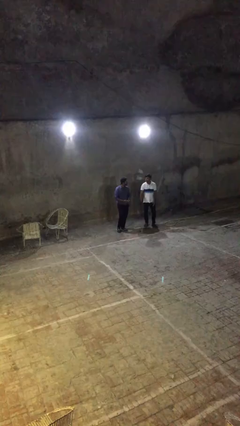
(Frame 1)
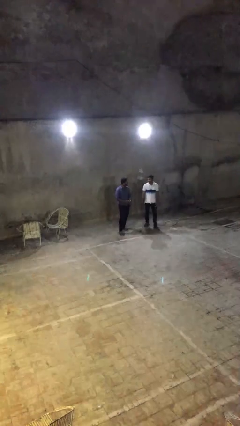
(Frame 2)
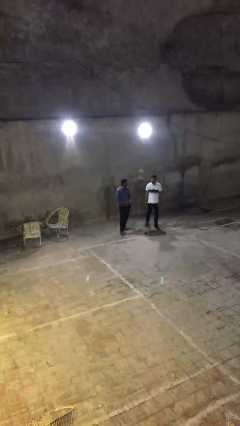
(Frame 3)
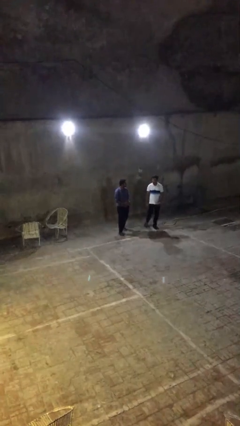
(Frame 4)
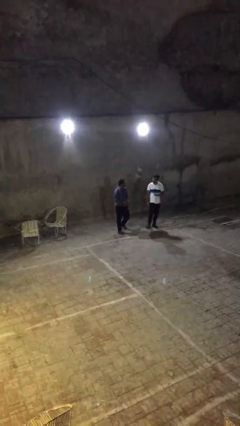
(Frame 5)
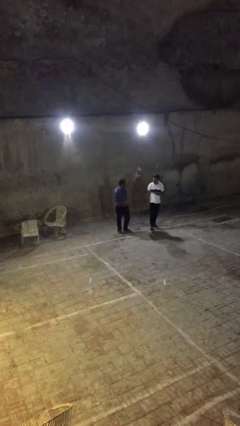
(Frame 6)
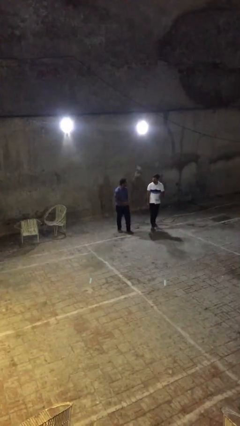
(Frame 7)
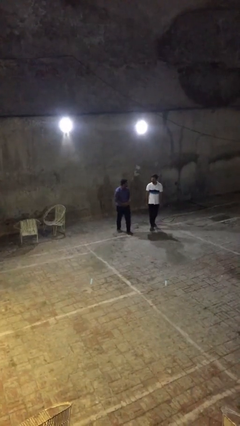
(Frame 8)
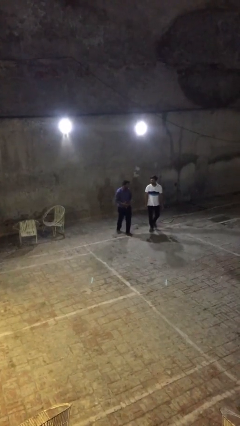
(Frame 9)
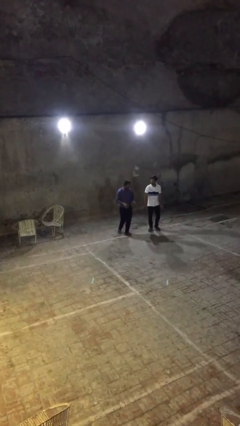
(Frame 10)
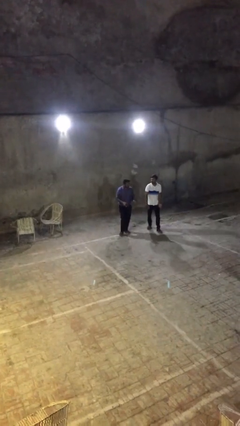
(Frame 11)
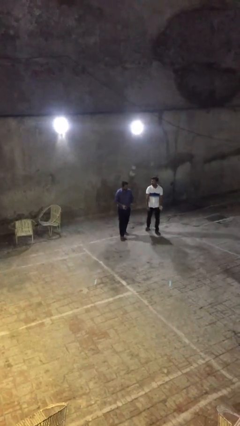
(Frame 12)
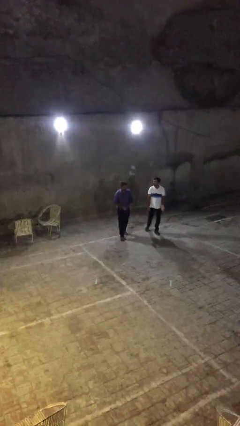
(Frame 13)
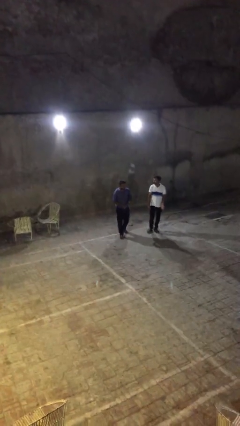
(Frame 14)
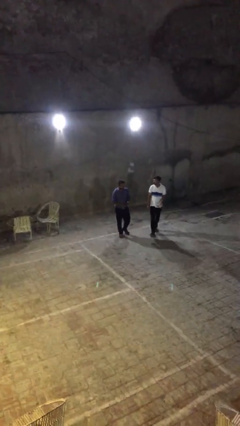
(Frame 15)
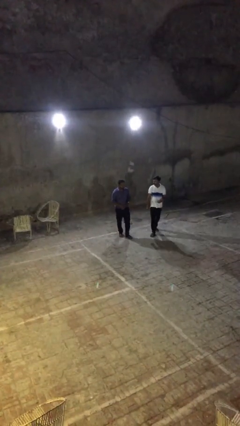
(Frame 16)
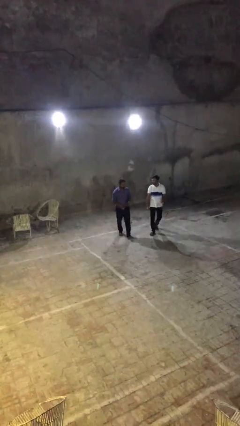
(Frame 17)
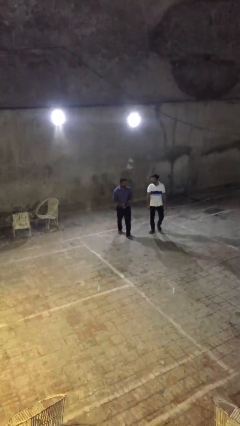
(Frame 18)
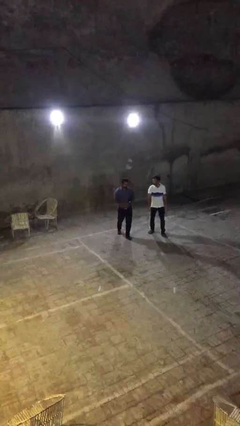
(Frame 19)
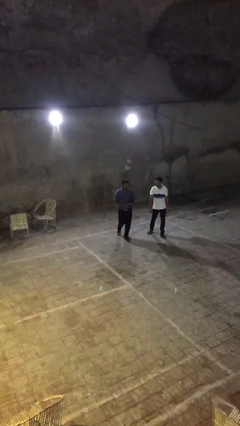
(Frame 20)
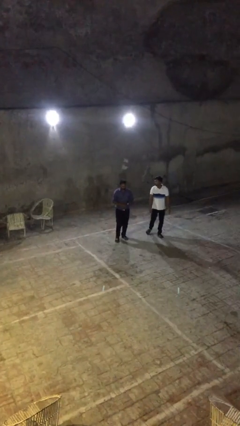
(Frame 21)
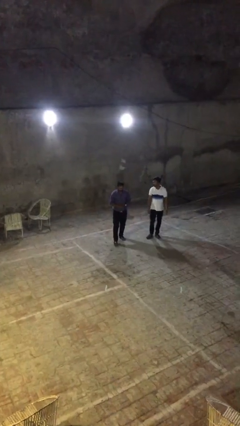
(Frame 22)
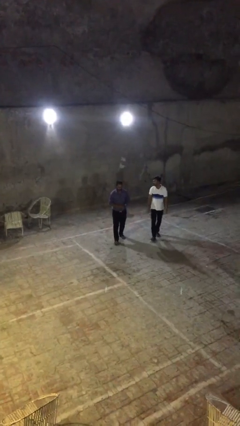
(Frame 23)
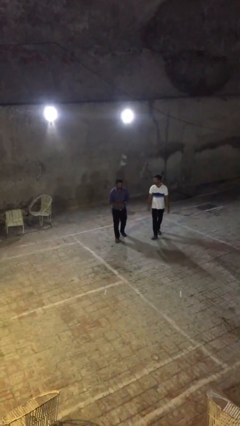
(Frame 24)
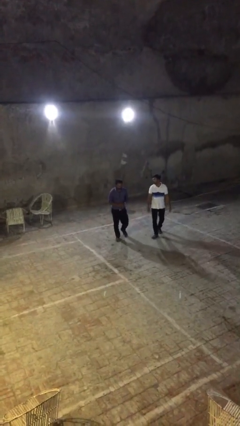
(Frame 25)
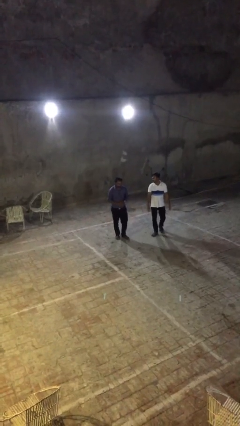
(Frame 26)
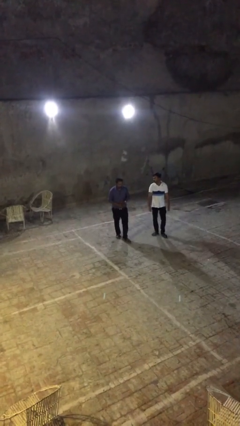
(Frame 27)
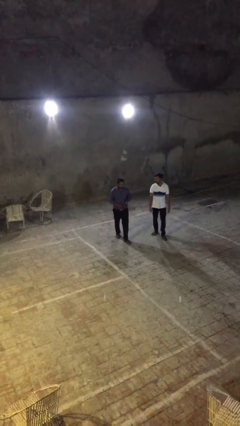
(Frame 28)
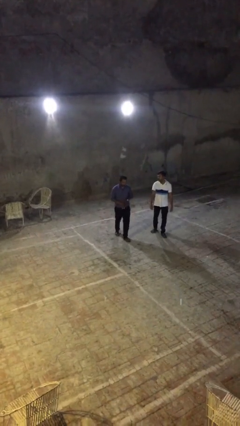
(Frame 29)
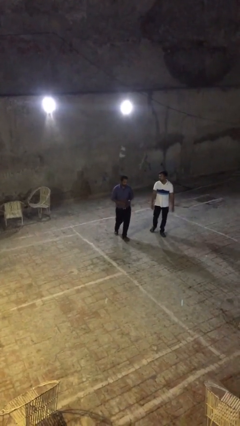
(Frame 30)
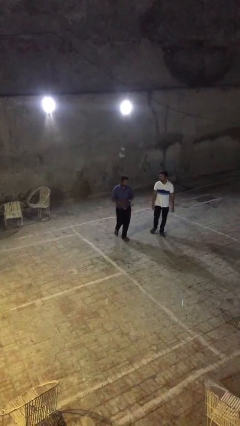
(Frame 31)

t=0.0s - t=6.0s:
person talks to person

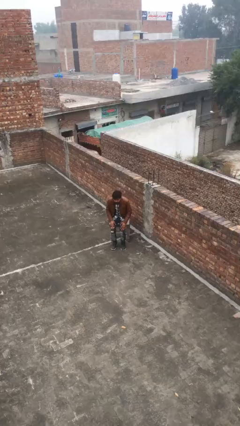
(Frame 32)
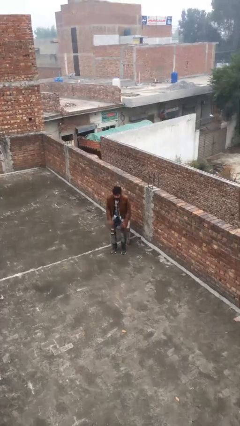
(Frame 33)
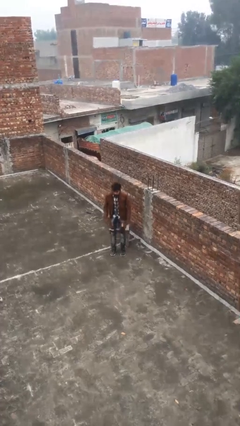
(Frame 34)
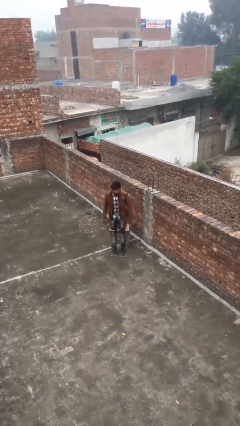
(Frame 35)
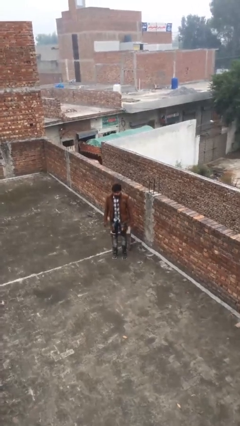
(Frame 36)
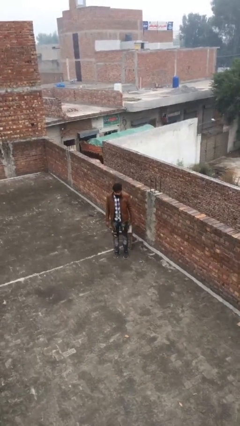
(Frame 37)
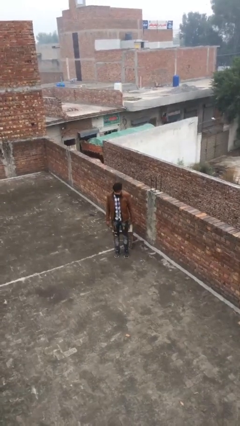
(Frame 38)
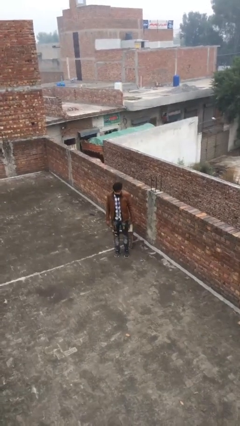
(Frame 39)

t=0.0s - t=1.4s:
person stands up

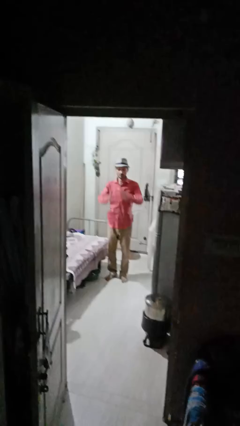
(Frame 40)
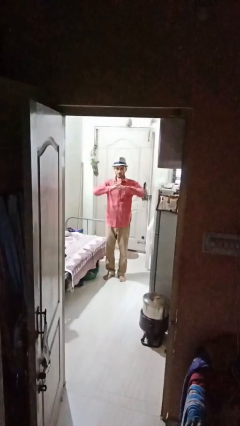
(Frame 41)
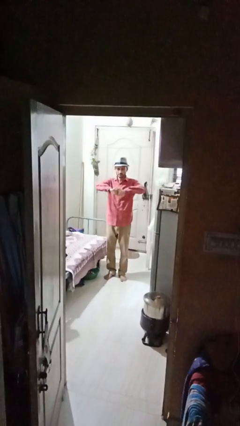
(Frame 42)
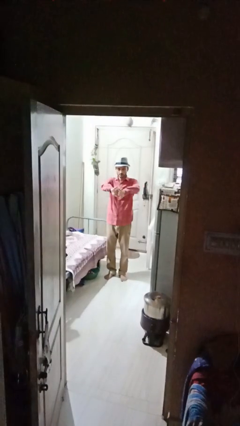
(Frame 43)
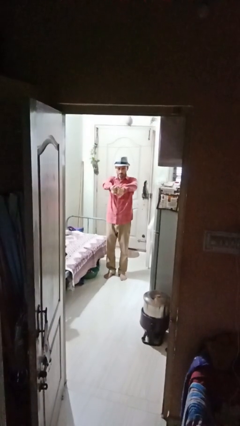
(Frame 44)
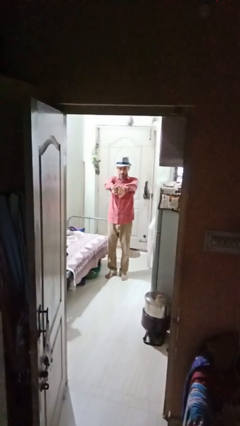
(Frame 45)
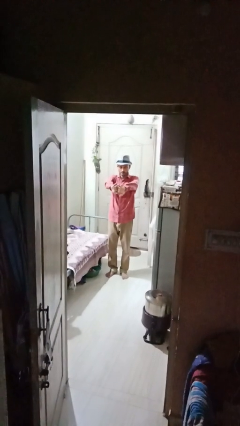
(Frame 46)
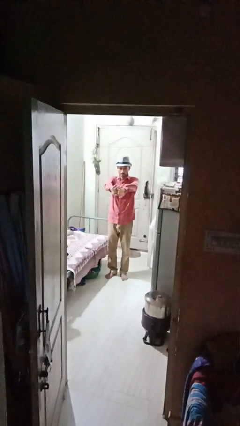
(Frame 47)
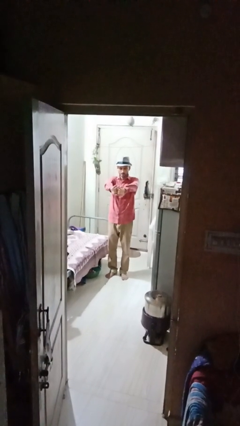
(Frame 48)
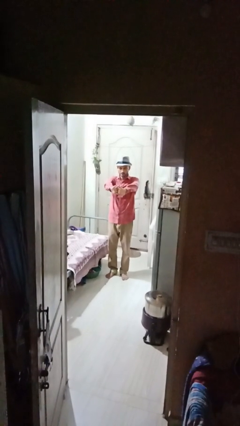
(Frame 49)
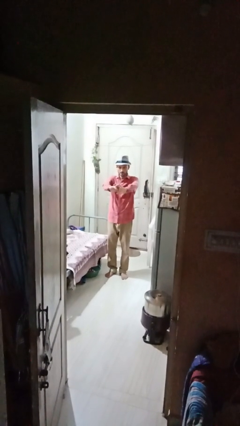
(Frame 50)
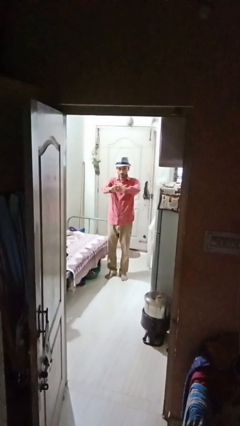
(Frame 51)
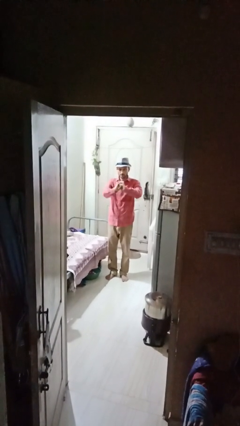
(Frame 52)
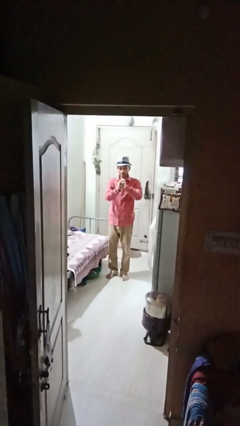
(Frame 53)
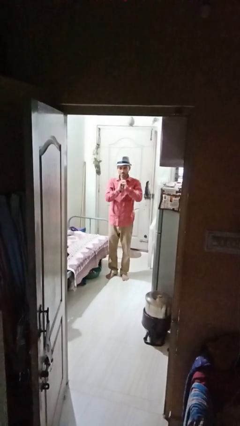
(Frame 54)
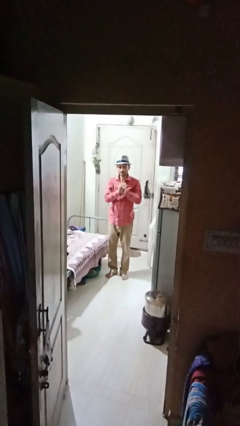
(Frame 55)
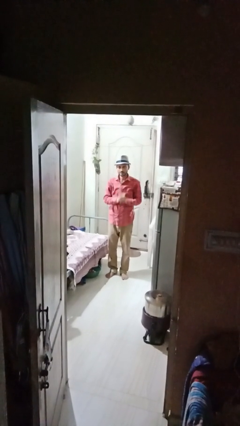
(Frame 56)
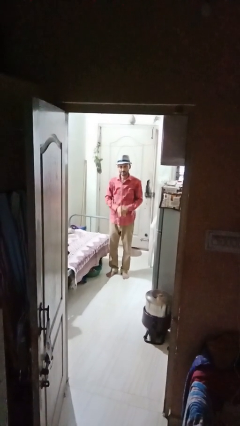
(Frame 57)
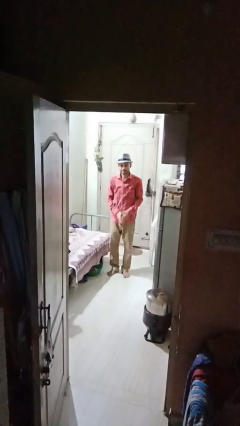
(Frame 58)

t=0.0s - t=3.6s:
person cracks knuckles

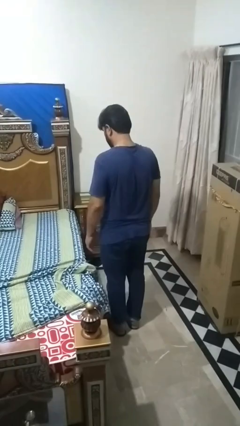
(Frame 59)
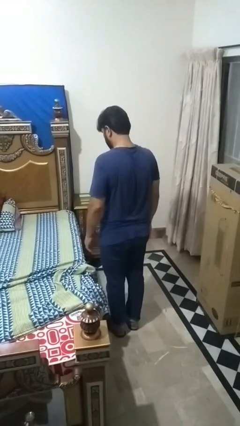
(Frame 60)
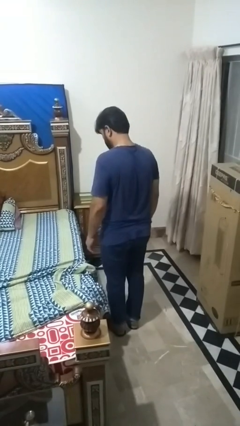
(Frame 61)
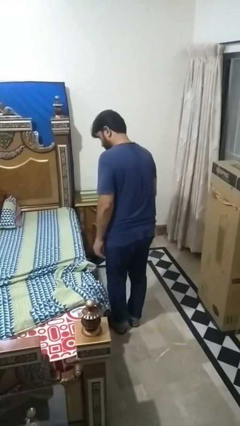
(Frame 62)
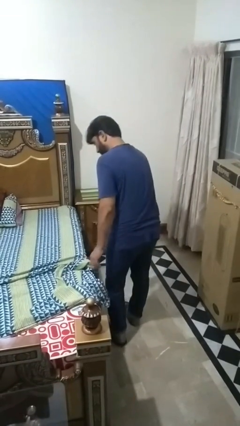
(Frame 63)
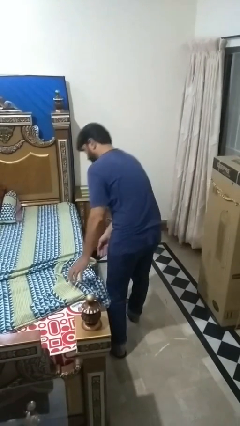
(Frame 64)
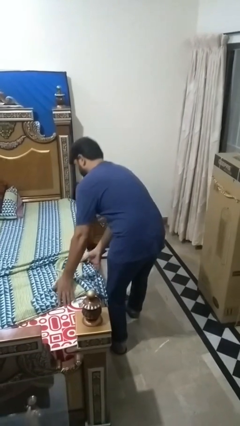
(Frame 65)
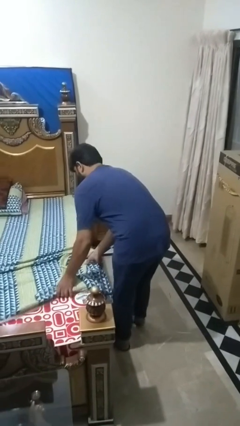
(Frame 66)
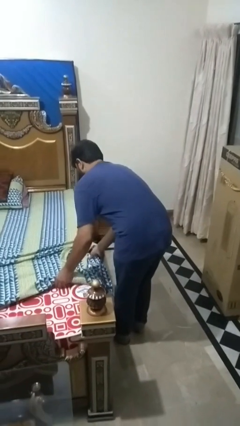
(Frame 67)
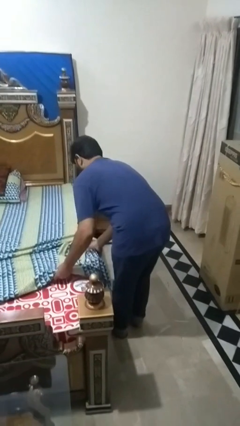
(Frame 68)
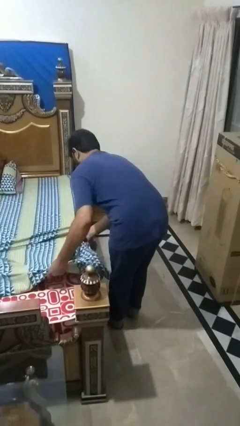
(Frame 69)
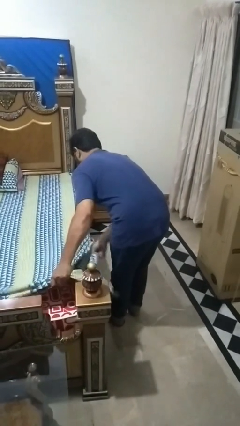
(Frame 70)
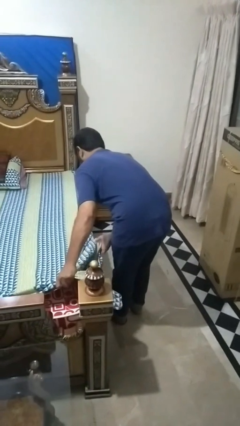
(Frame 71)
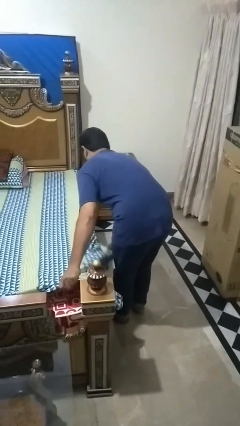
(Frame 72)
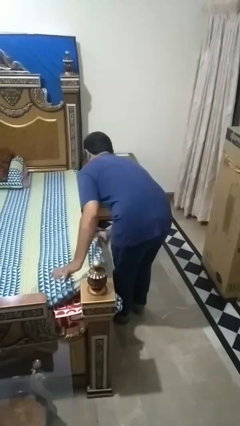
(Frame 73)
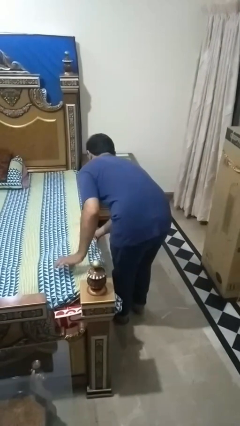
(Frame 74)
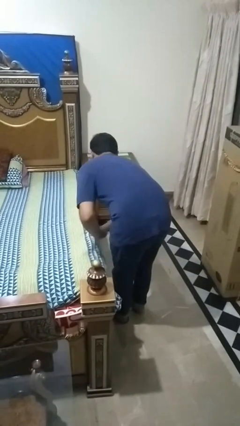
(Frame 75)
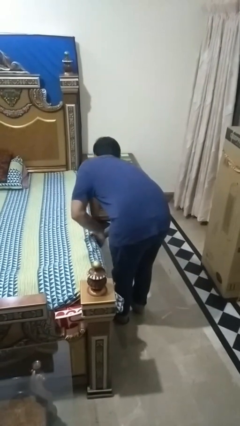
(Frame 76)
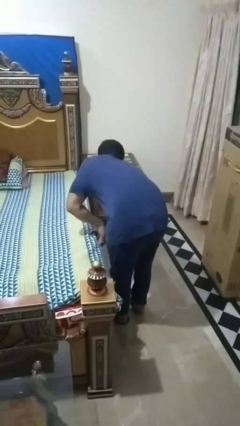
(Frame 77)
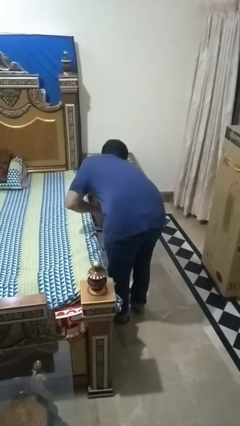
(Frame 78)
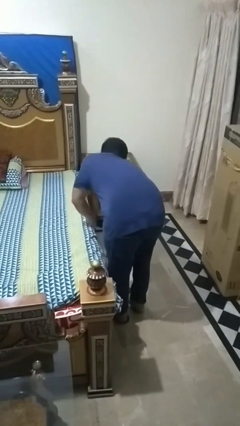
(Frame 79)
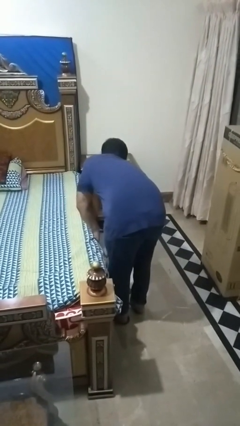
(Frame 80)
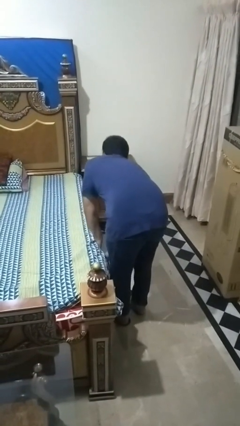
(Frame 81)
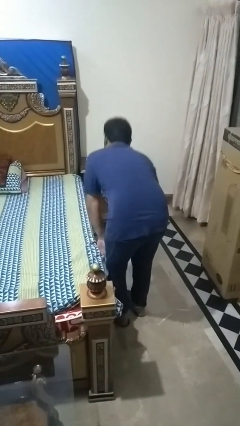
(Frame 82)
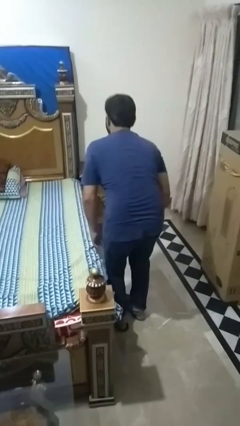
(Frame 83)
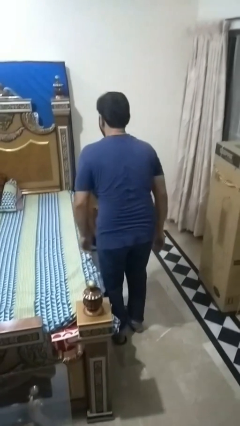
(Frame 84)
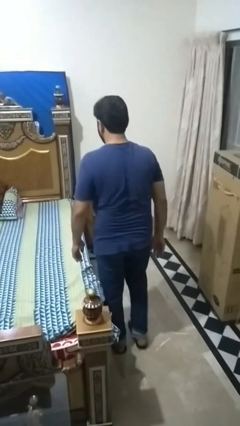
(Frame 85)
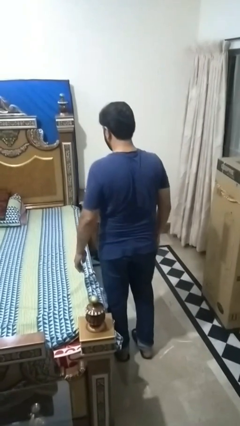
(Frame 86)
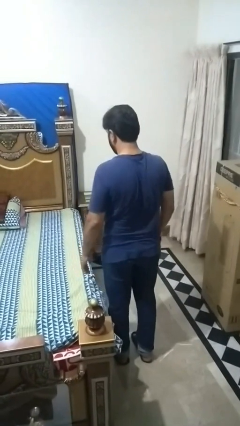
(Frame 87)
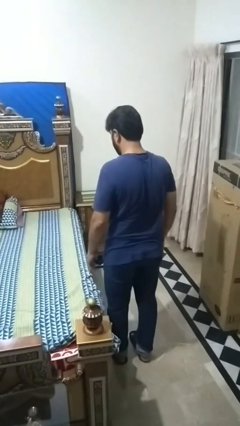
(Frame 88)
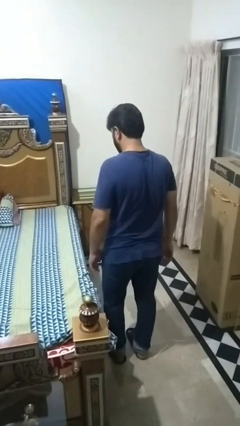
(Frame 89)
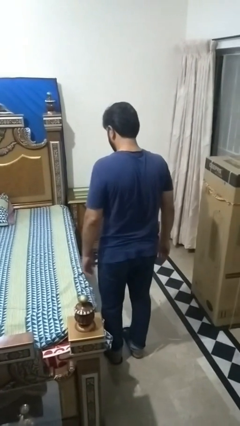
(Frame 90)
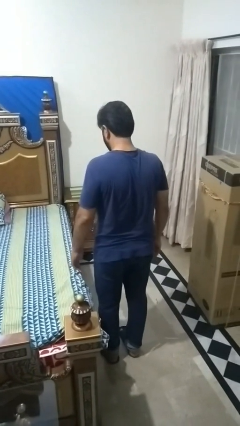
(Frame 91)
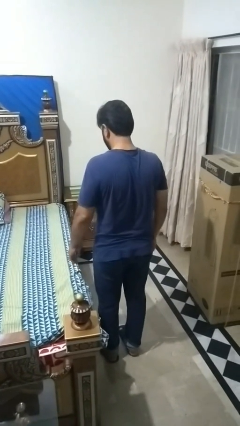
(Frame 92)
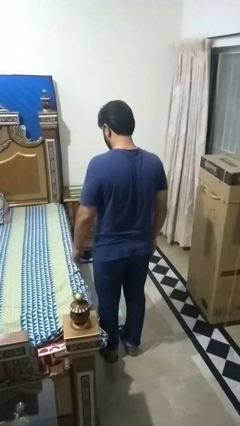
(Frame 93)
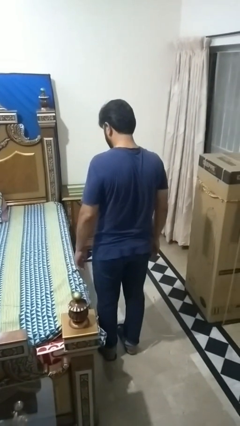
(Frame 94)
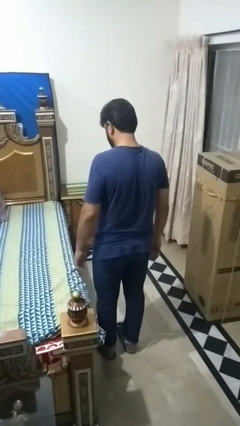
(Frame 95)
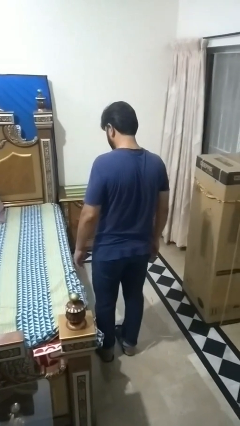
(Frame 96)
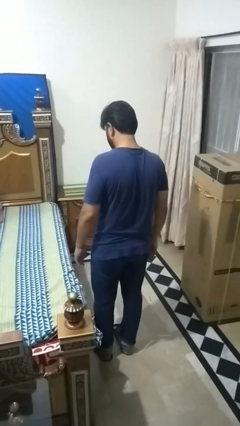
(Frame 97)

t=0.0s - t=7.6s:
person makes bed
